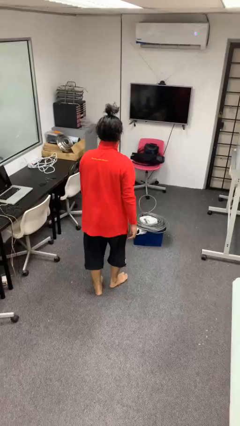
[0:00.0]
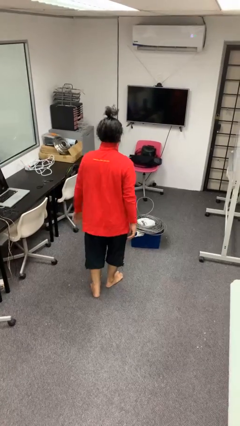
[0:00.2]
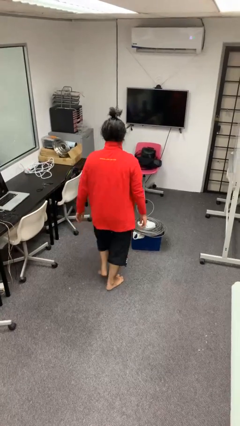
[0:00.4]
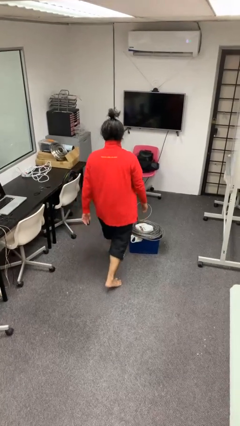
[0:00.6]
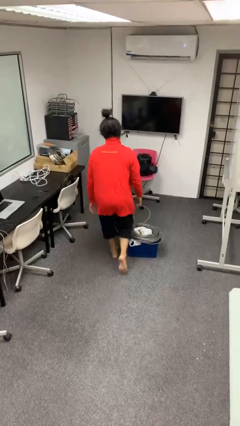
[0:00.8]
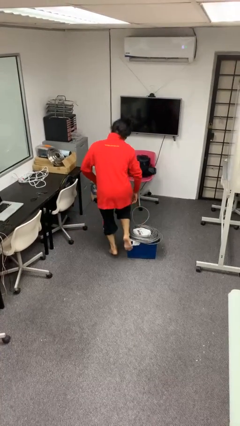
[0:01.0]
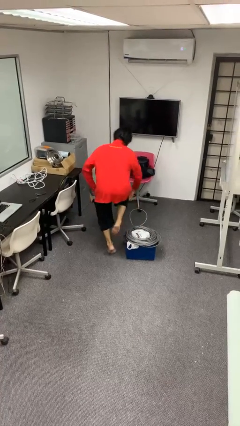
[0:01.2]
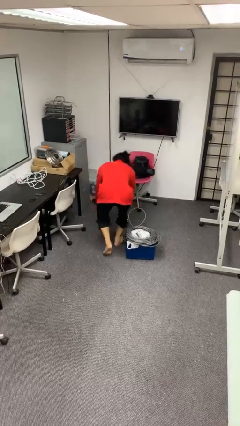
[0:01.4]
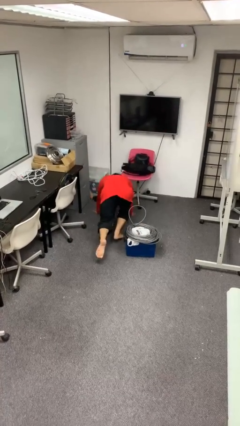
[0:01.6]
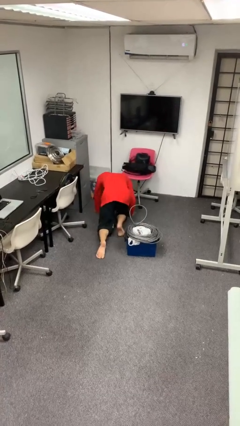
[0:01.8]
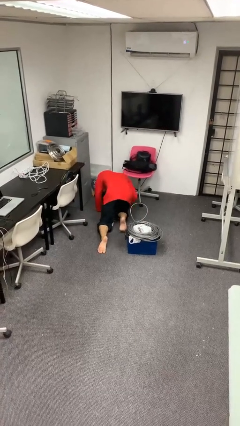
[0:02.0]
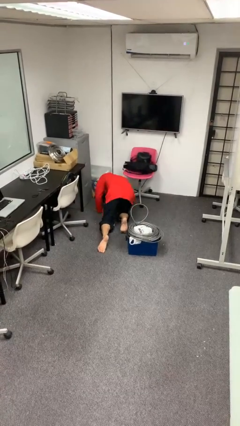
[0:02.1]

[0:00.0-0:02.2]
person trips on object on floor

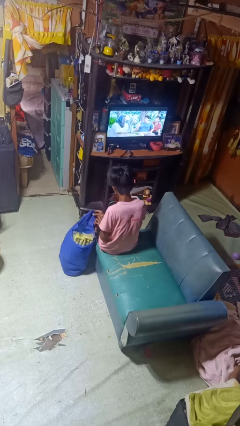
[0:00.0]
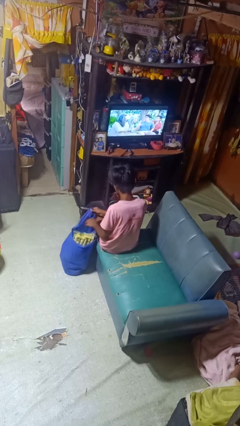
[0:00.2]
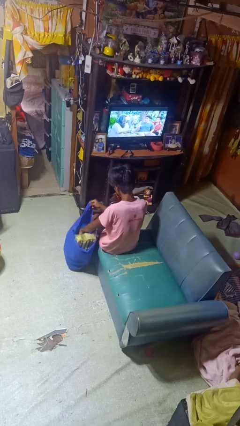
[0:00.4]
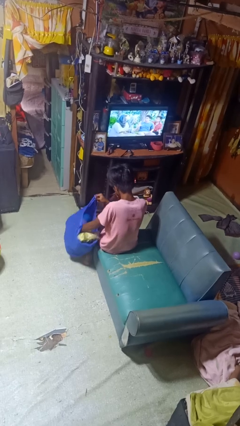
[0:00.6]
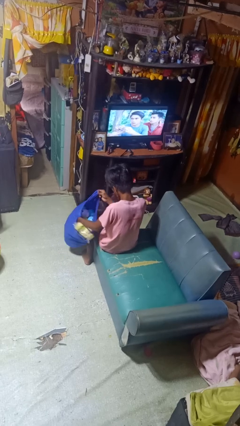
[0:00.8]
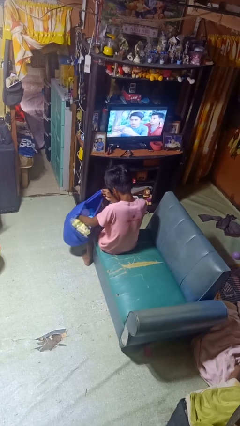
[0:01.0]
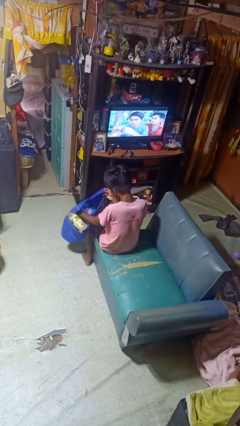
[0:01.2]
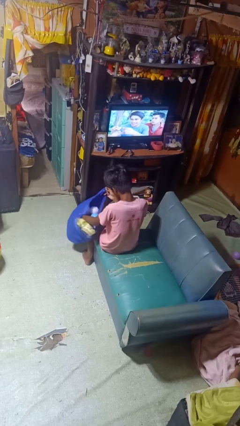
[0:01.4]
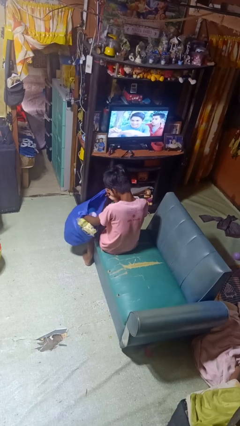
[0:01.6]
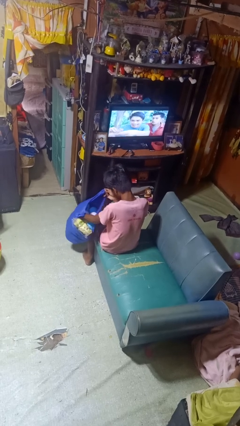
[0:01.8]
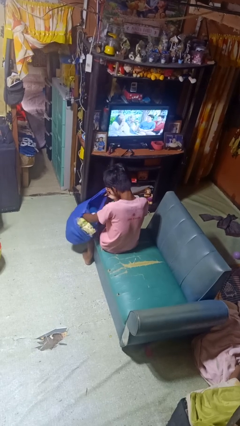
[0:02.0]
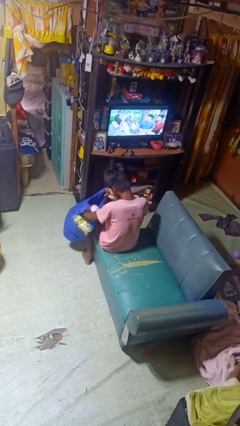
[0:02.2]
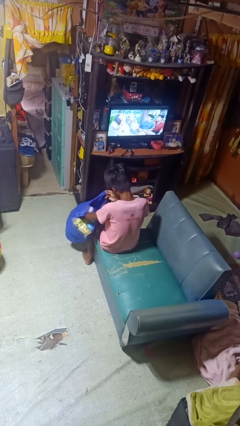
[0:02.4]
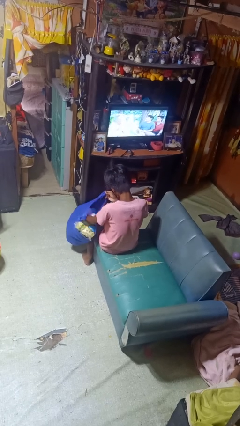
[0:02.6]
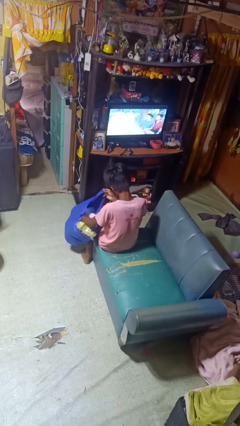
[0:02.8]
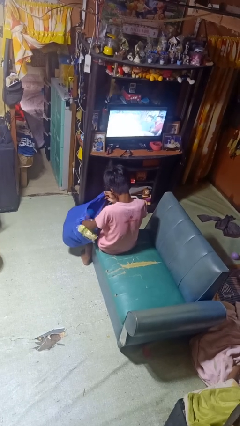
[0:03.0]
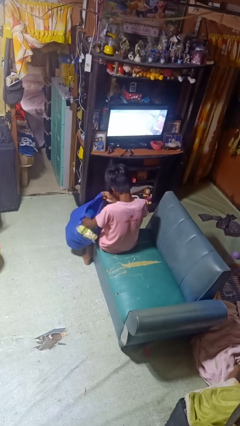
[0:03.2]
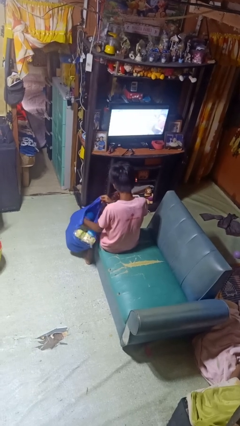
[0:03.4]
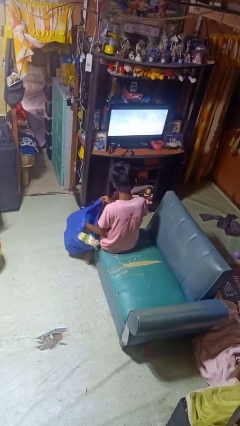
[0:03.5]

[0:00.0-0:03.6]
person searches in bag

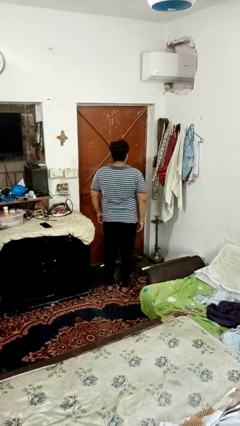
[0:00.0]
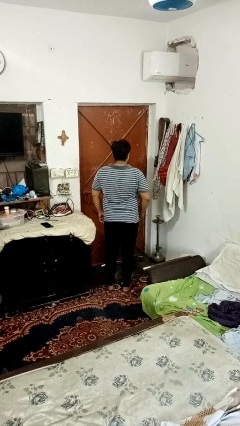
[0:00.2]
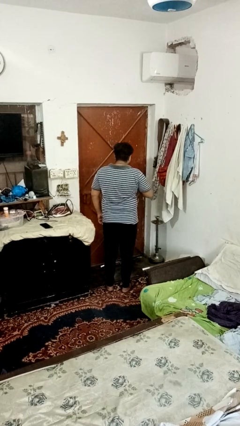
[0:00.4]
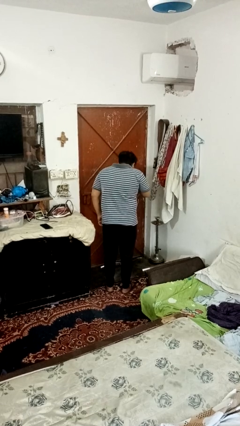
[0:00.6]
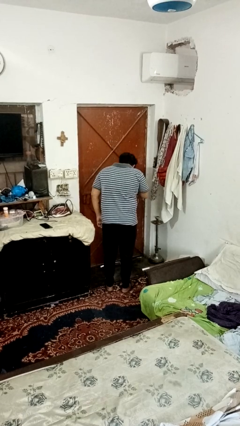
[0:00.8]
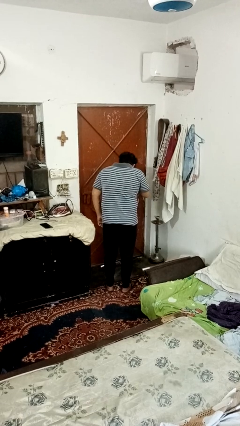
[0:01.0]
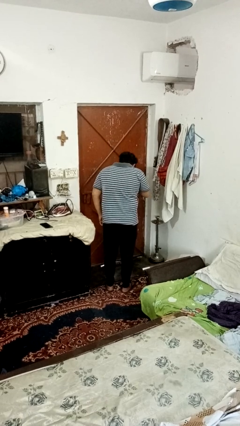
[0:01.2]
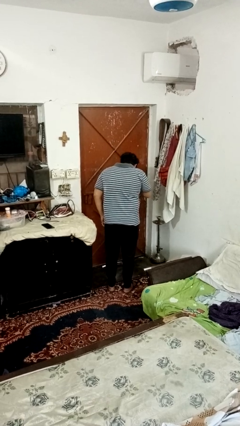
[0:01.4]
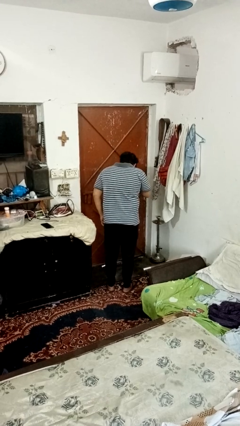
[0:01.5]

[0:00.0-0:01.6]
person sneezes into hand

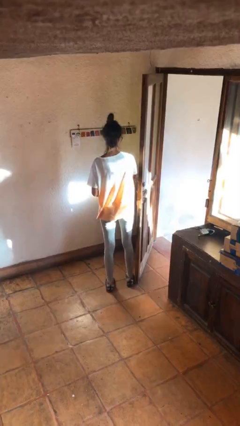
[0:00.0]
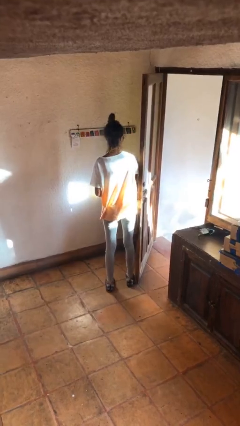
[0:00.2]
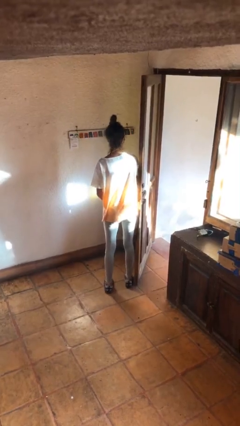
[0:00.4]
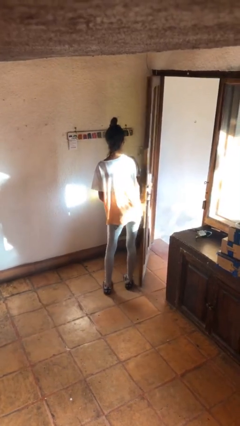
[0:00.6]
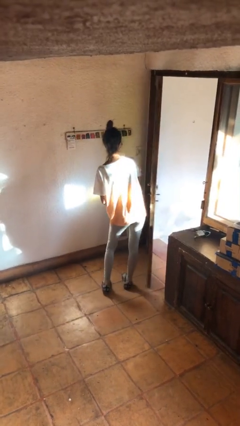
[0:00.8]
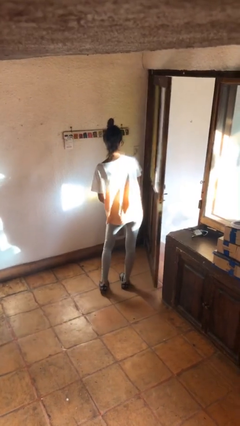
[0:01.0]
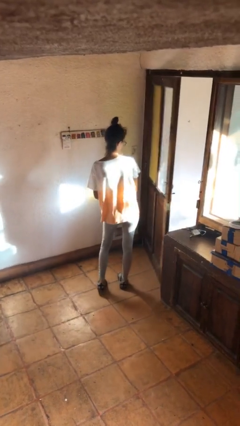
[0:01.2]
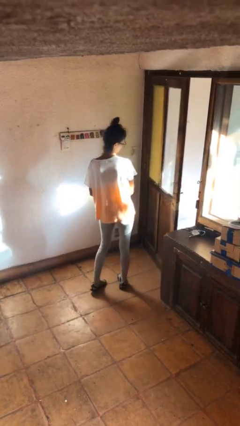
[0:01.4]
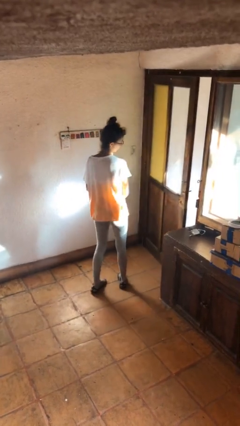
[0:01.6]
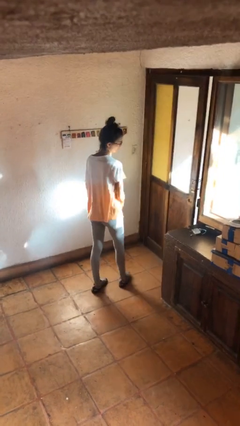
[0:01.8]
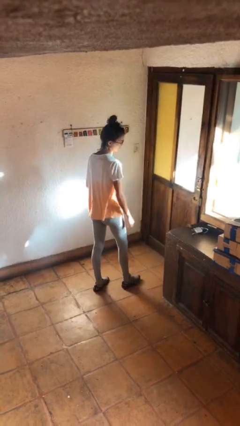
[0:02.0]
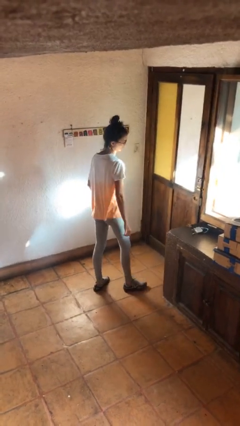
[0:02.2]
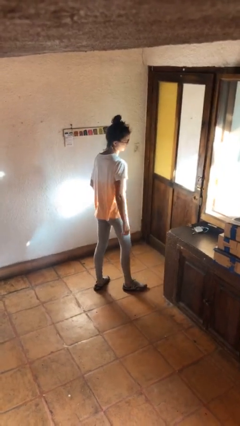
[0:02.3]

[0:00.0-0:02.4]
person closes door with hip

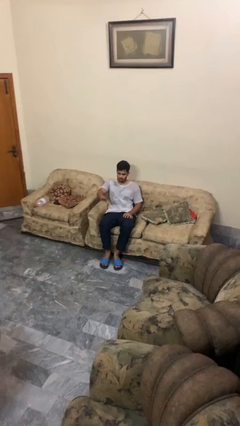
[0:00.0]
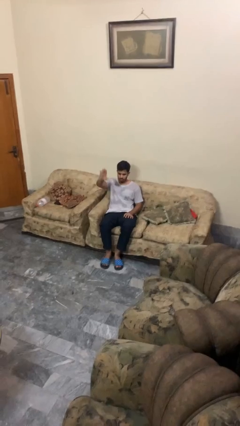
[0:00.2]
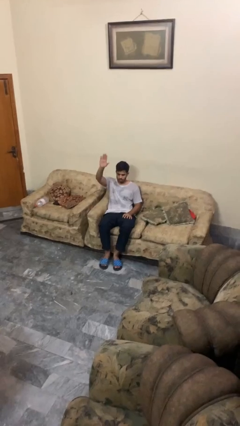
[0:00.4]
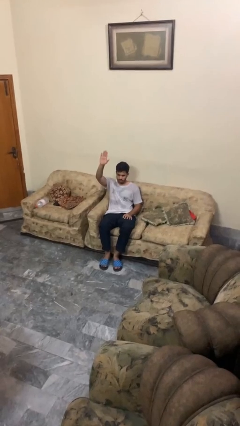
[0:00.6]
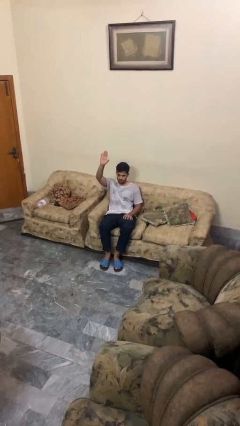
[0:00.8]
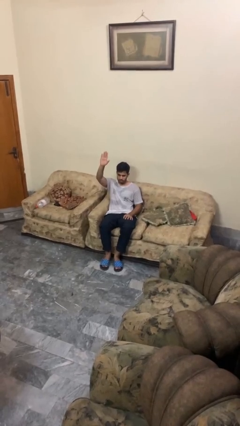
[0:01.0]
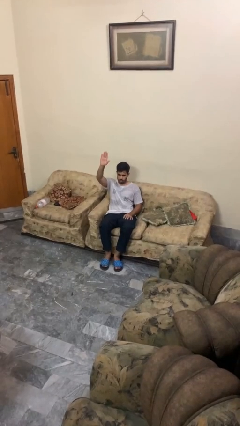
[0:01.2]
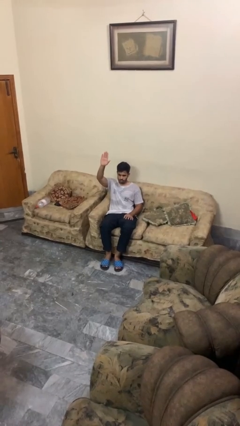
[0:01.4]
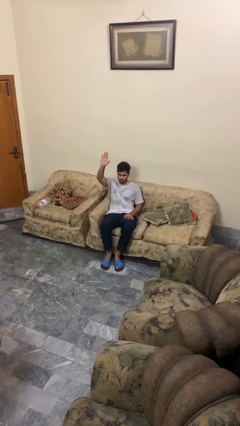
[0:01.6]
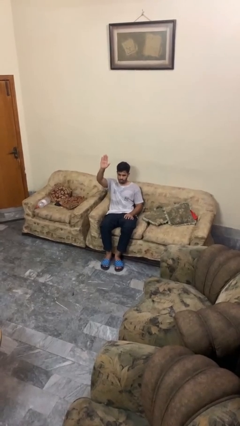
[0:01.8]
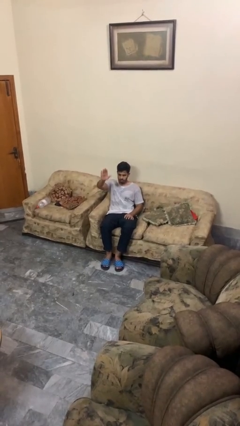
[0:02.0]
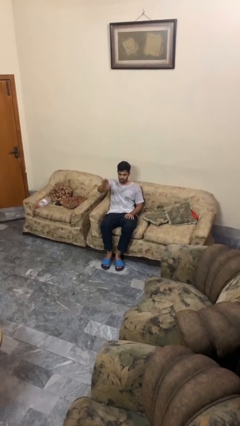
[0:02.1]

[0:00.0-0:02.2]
person gestures raise hand

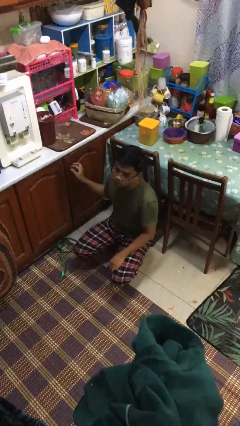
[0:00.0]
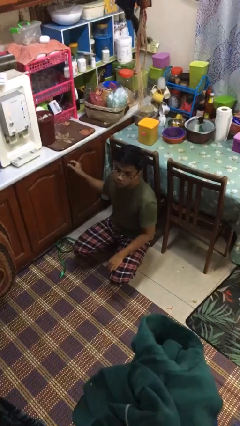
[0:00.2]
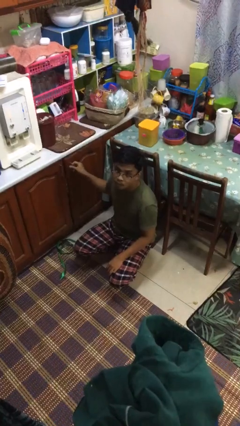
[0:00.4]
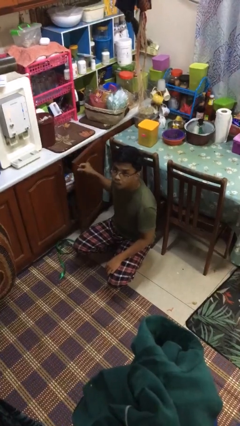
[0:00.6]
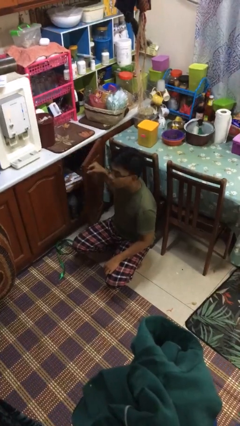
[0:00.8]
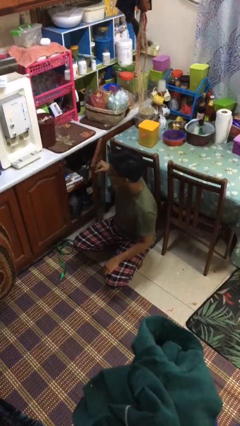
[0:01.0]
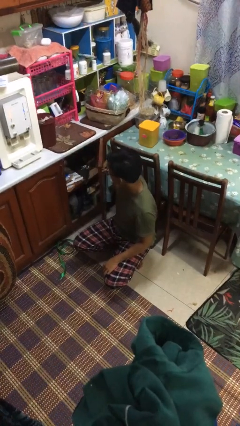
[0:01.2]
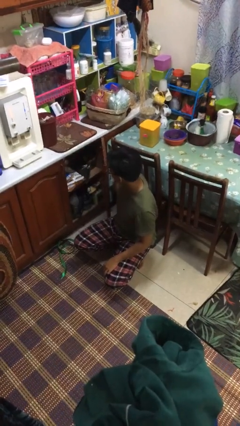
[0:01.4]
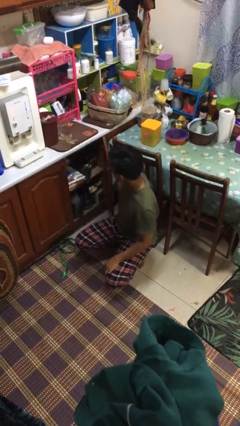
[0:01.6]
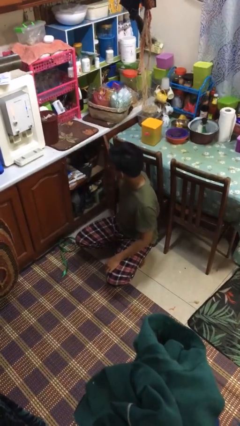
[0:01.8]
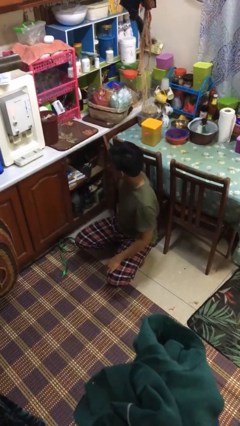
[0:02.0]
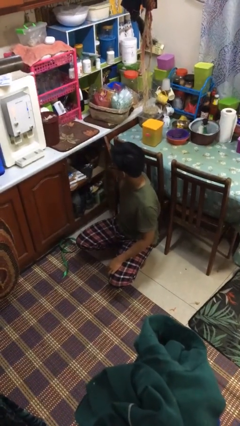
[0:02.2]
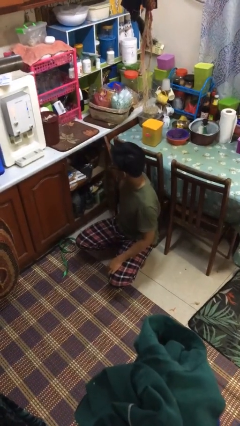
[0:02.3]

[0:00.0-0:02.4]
person opens kitchen drawer

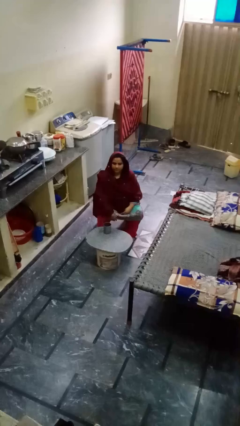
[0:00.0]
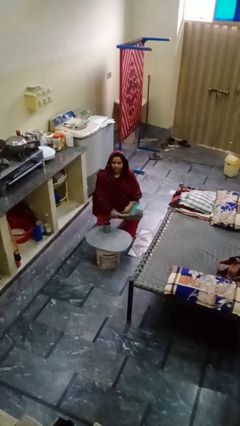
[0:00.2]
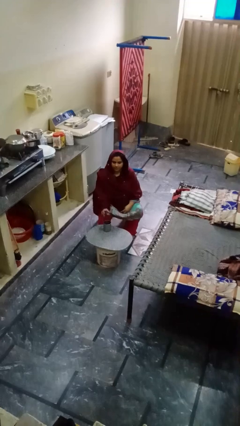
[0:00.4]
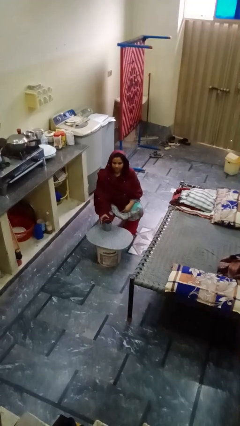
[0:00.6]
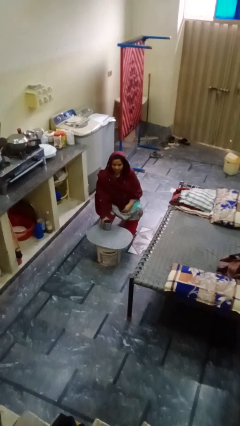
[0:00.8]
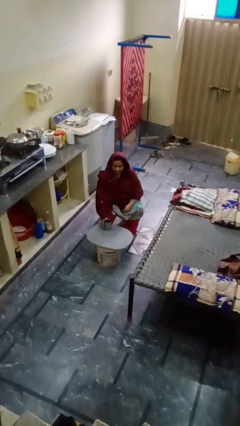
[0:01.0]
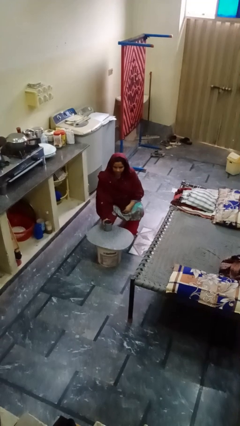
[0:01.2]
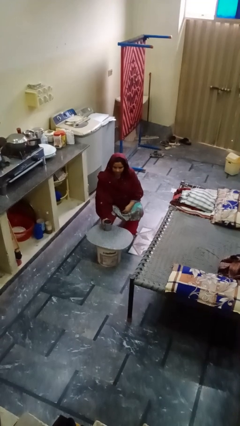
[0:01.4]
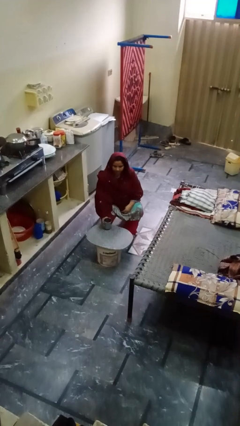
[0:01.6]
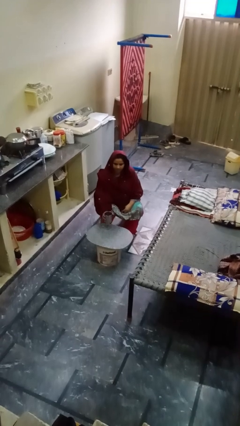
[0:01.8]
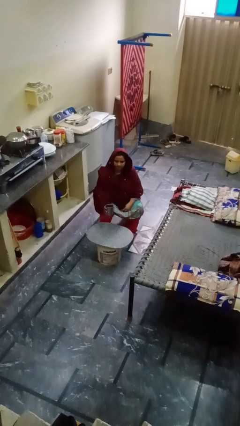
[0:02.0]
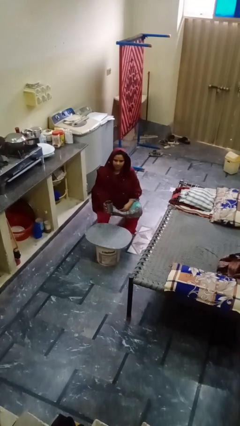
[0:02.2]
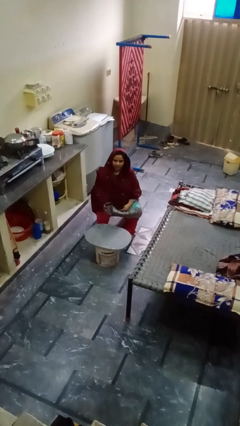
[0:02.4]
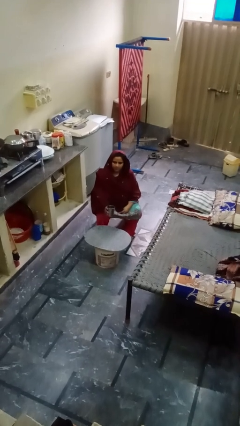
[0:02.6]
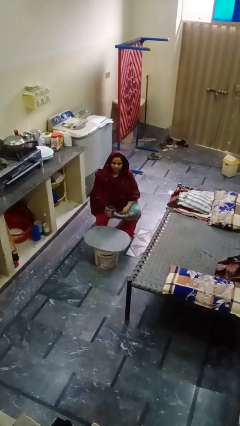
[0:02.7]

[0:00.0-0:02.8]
person picks up object from table
